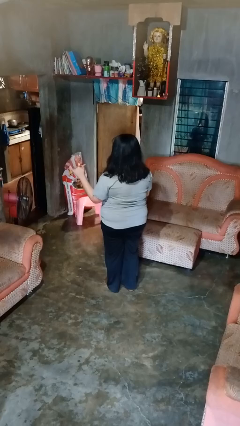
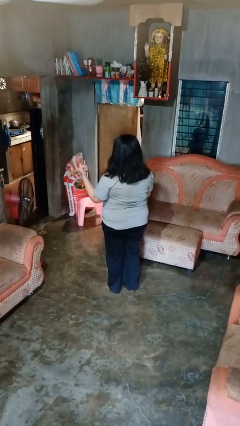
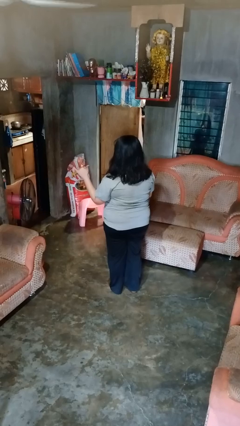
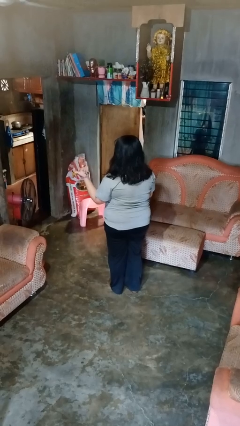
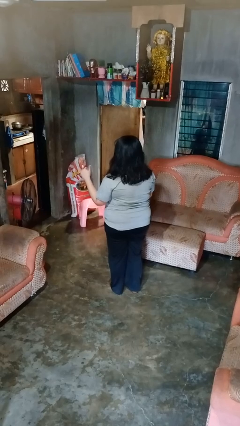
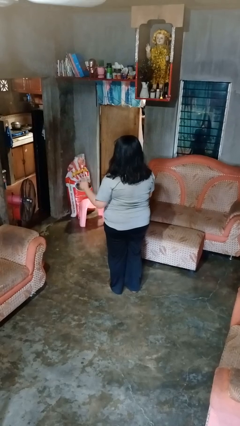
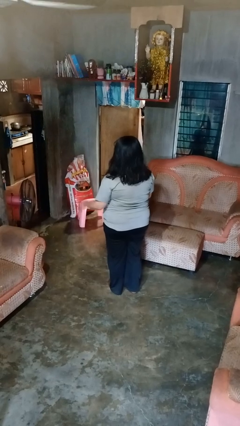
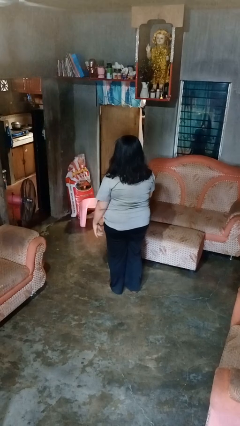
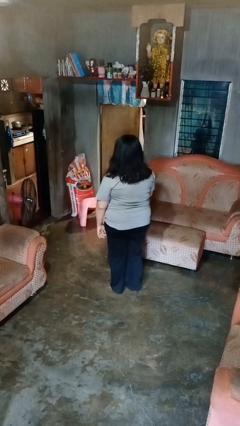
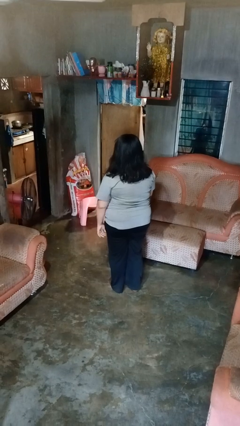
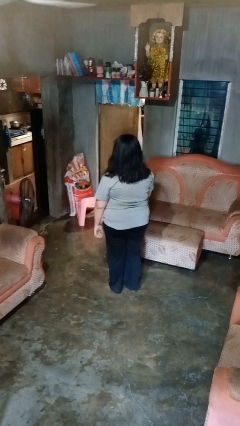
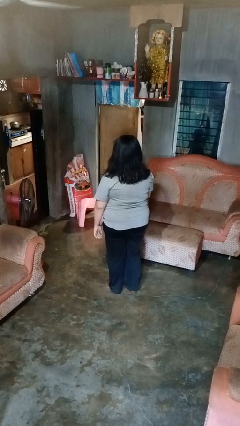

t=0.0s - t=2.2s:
person gestures hang loose

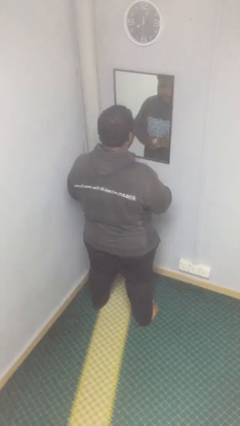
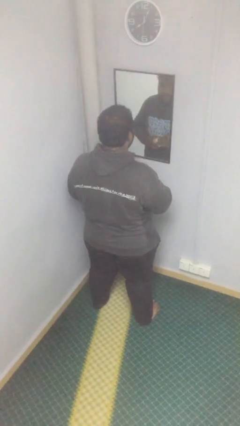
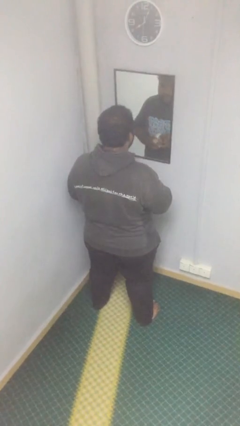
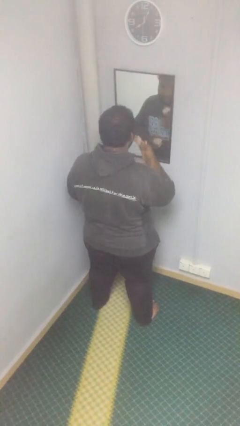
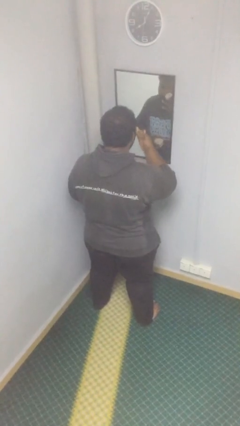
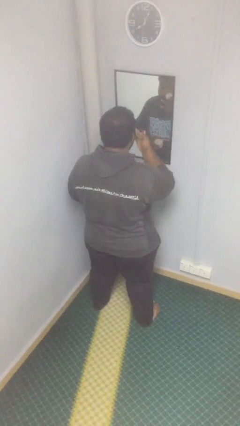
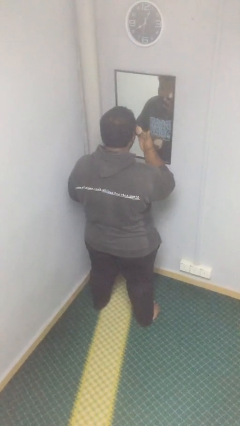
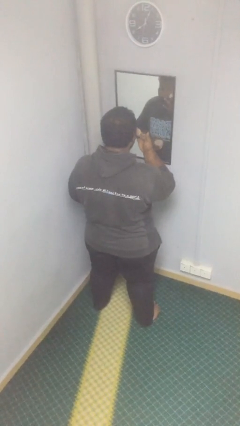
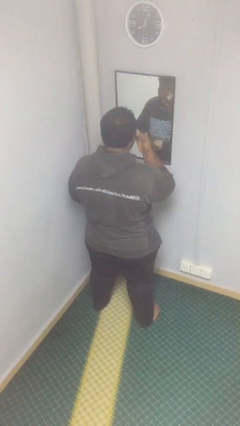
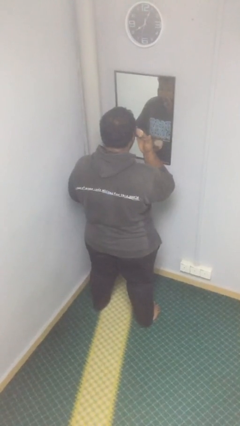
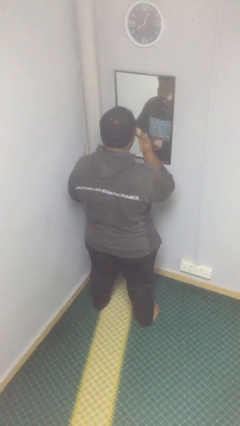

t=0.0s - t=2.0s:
person applies foundation makeup

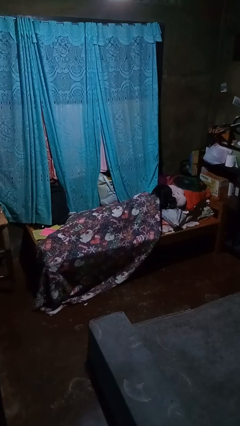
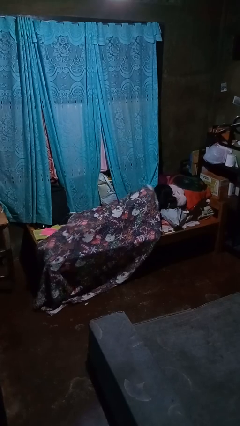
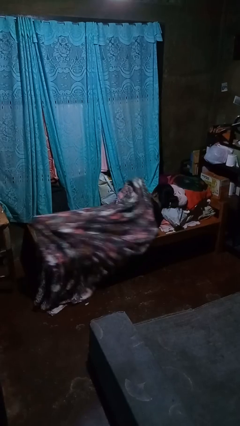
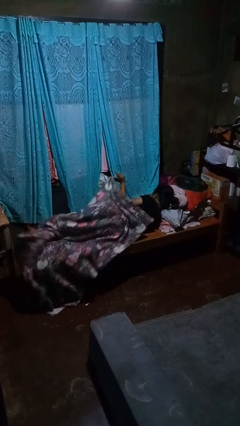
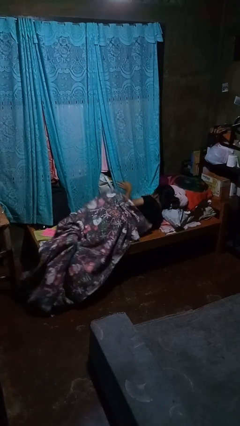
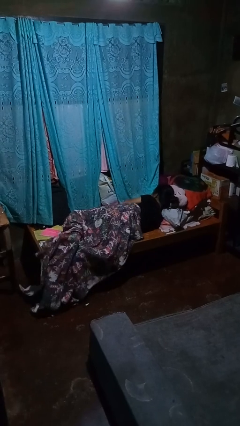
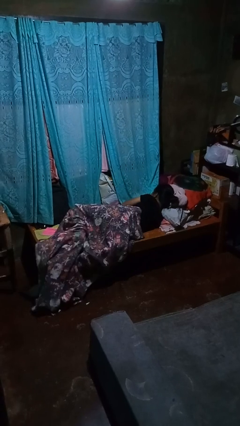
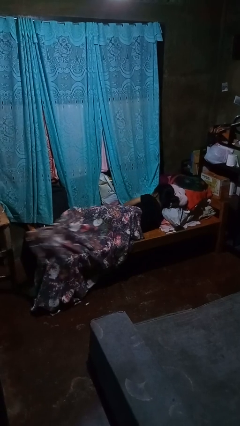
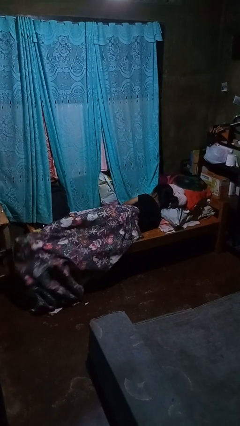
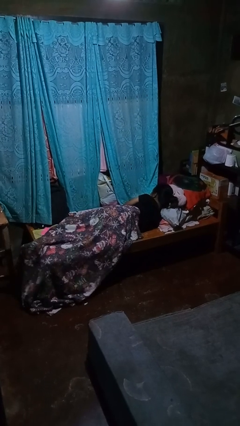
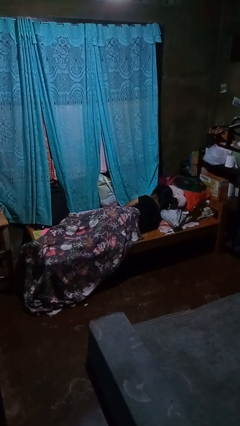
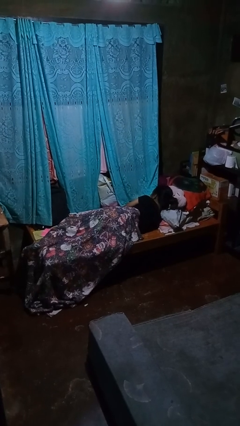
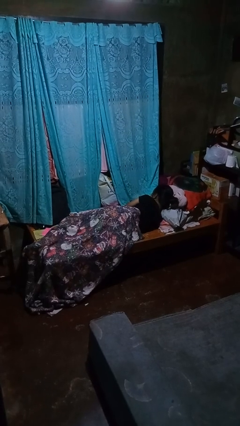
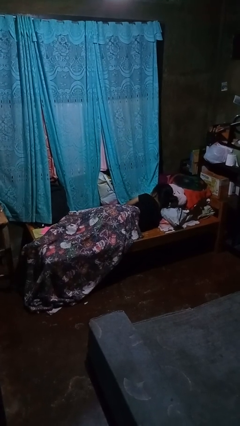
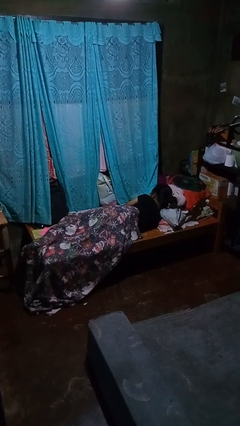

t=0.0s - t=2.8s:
person uncovers with bedsheets

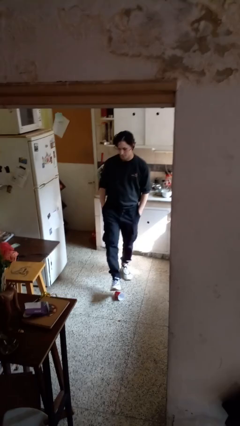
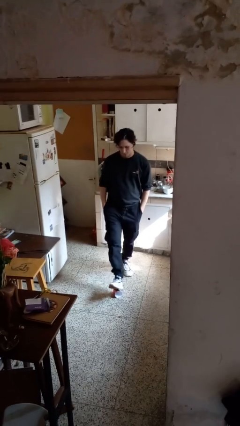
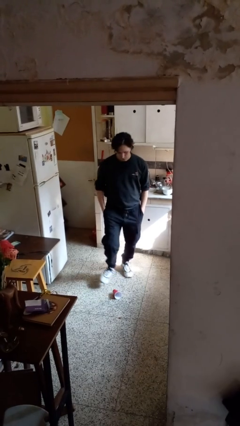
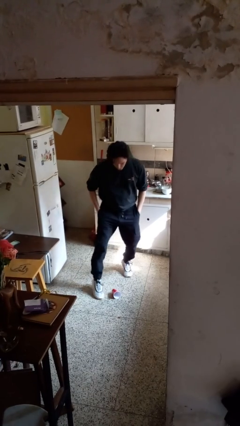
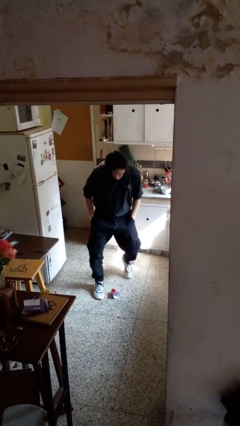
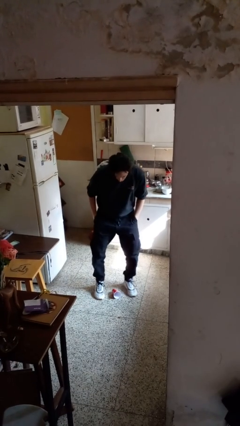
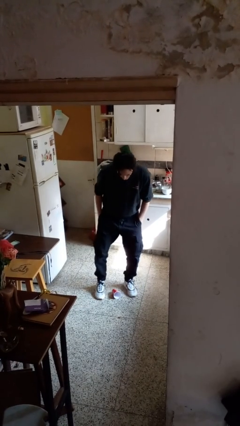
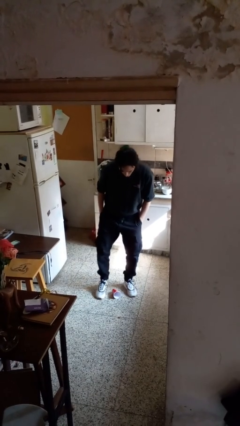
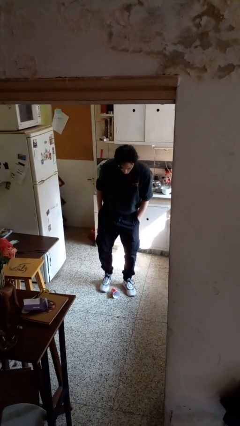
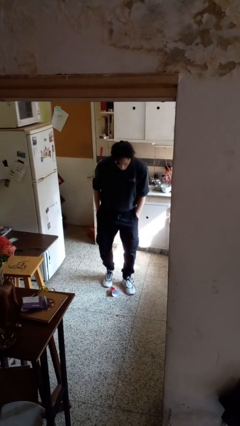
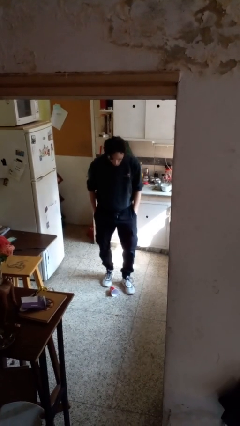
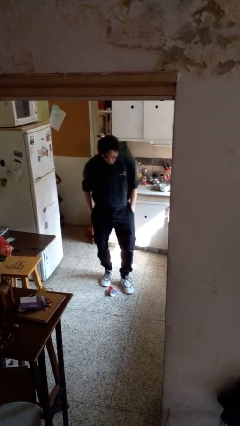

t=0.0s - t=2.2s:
person spills on floor

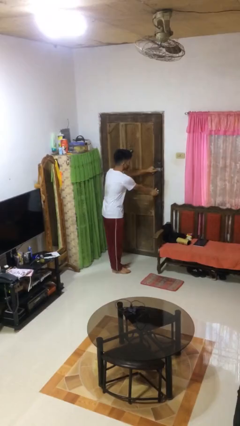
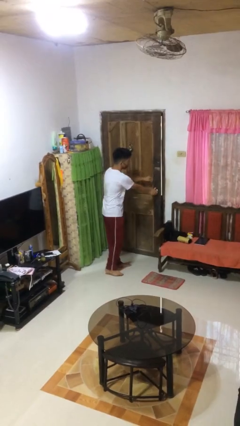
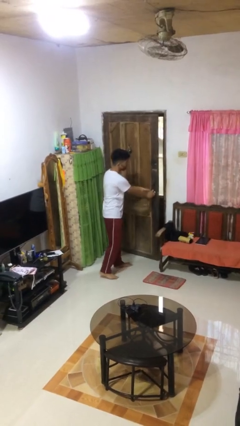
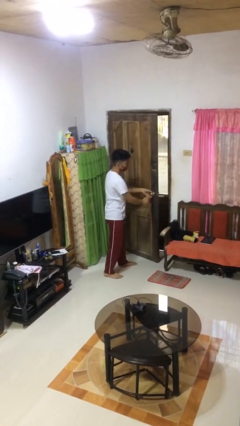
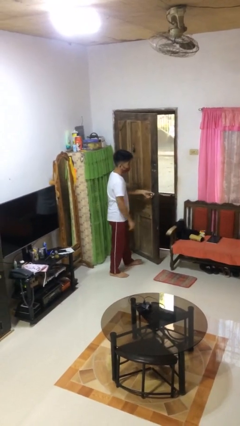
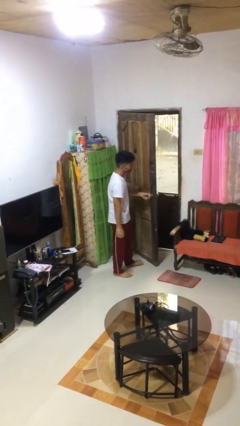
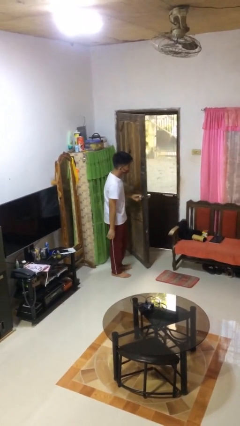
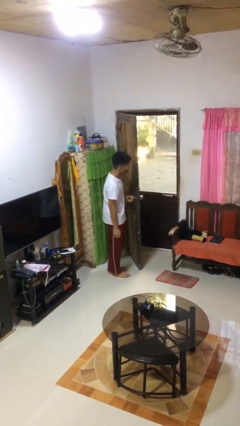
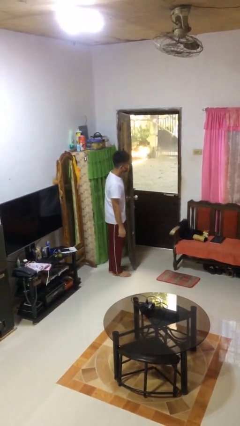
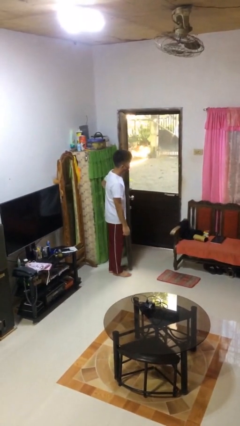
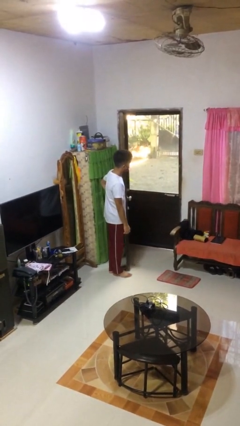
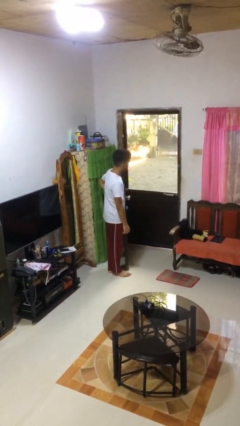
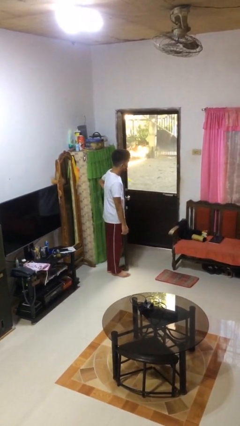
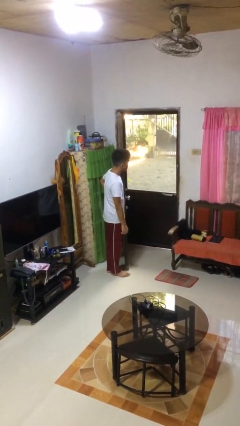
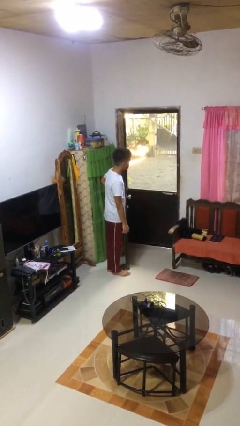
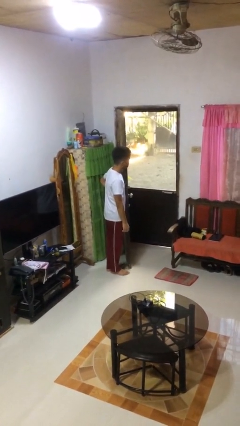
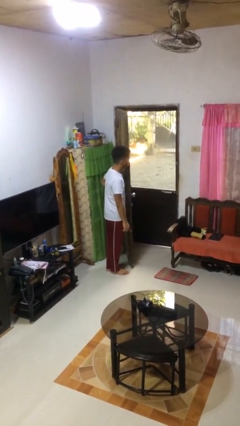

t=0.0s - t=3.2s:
person opens facility door

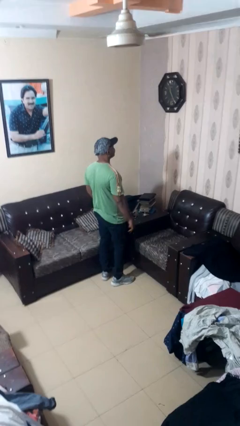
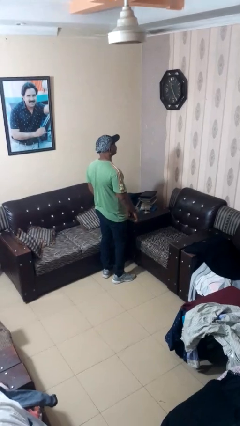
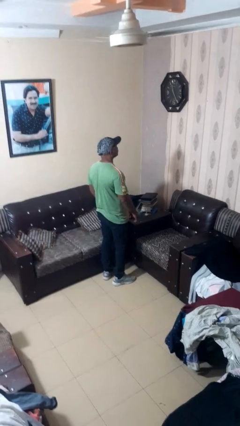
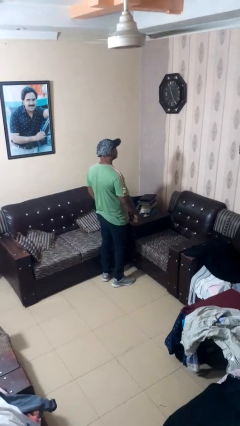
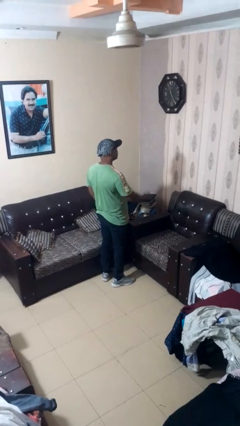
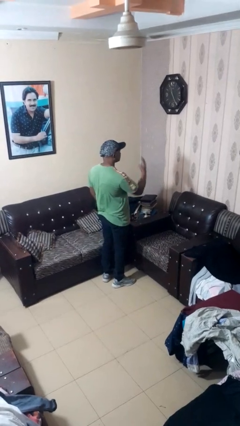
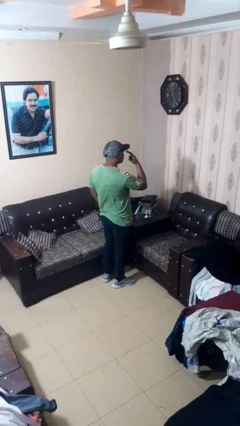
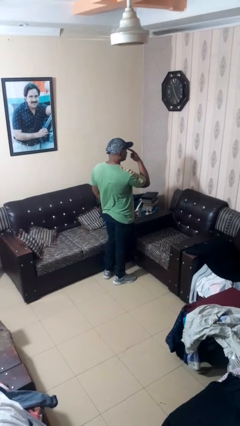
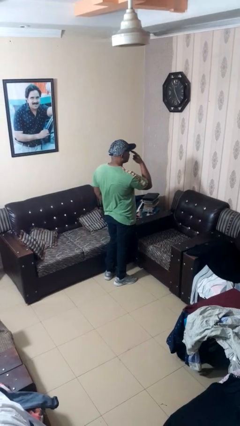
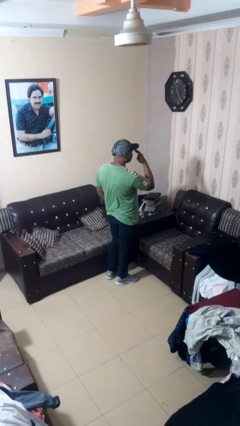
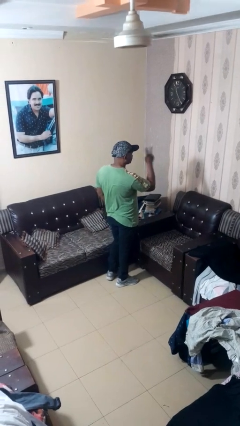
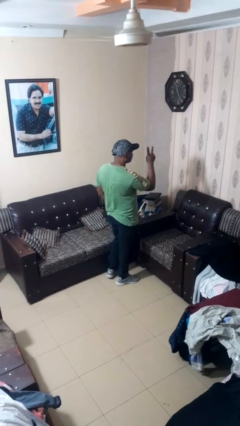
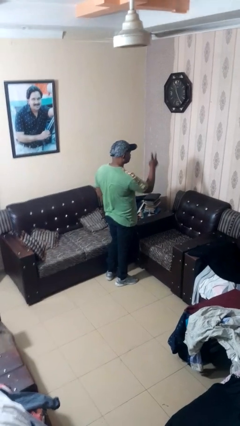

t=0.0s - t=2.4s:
person gestures watch closely

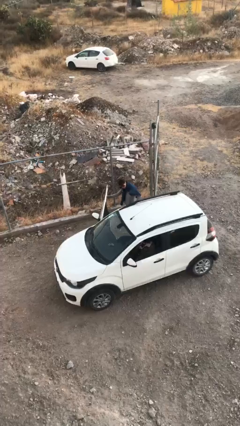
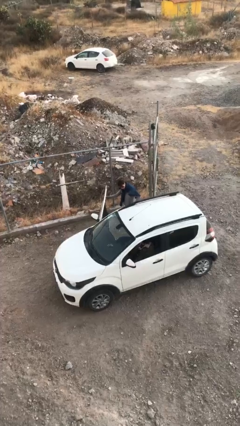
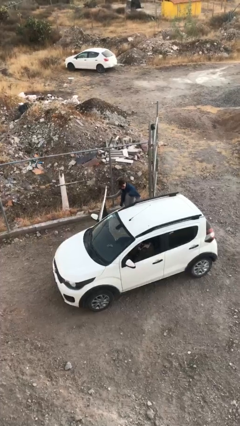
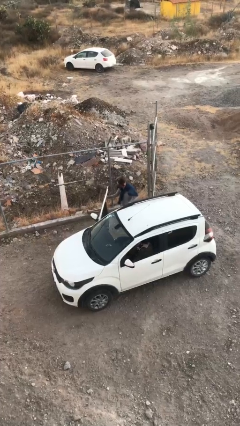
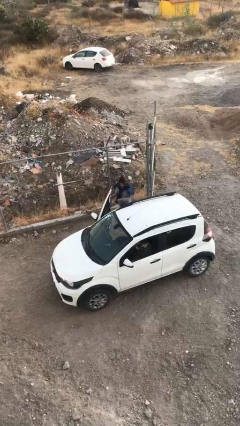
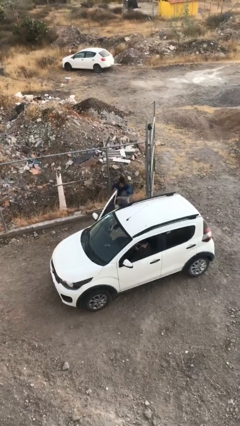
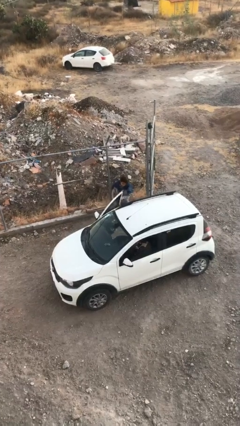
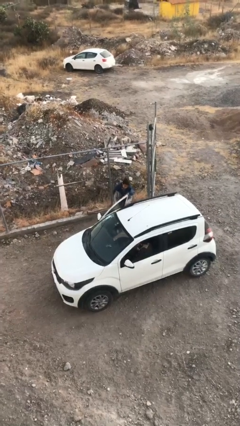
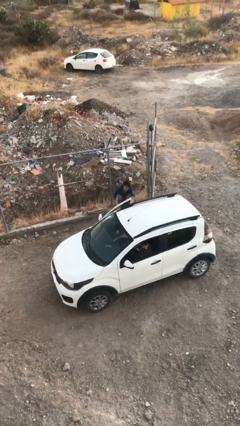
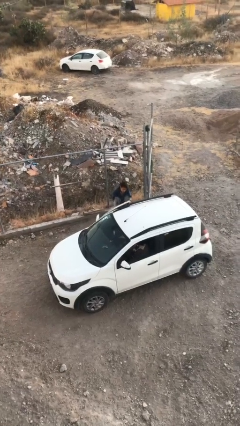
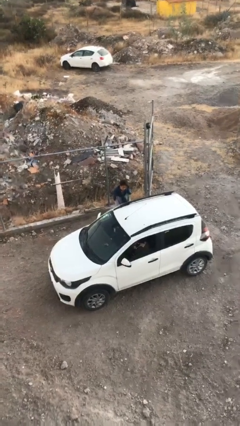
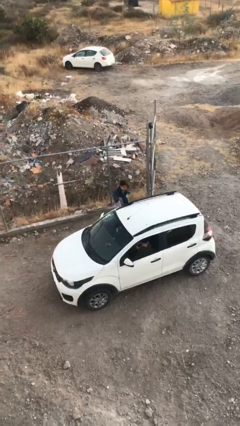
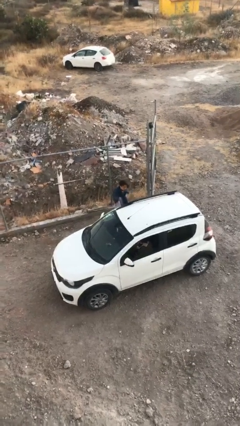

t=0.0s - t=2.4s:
person closes car door
